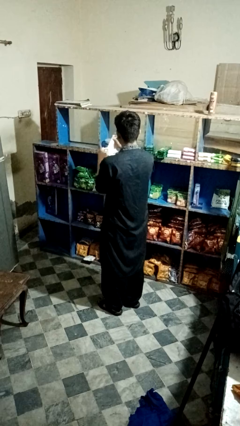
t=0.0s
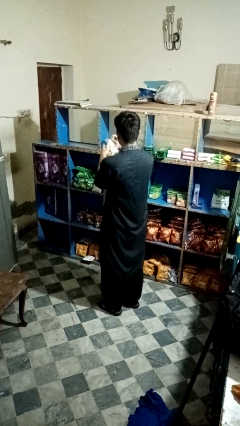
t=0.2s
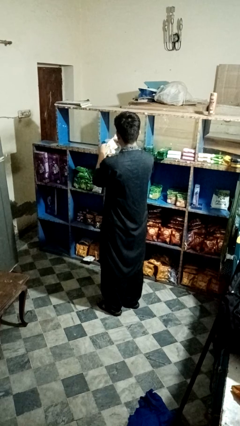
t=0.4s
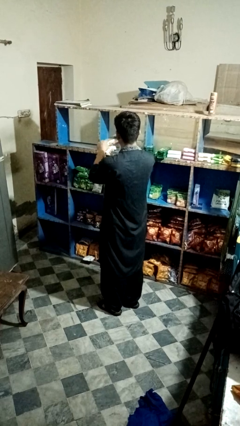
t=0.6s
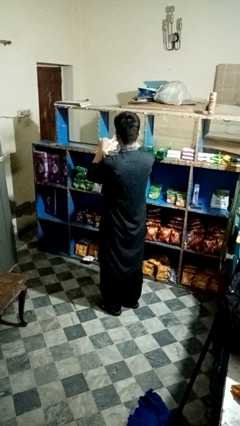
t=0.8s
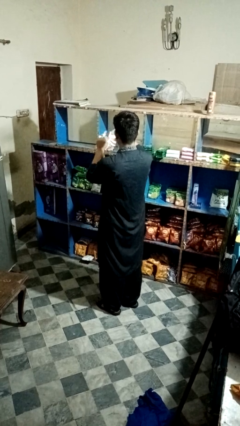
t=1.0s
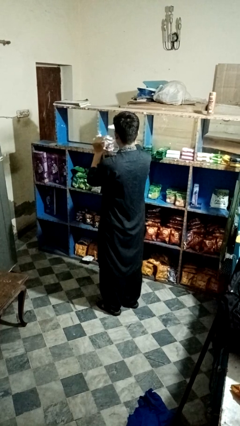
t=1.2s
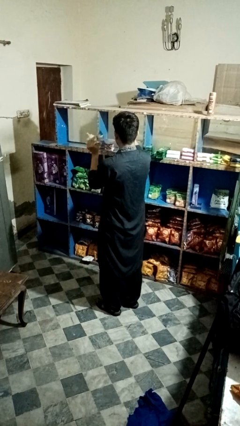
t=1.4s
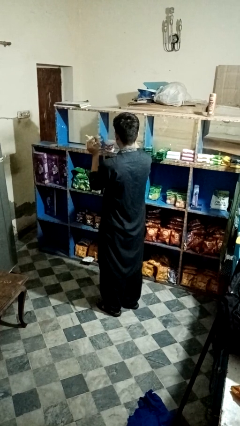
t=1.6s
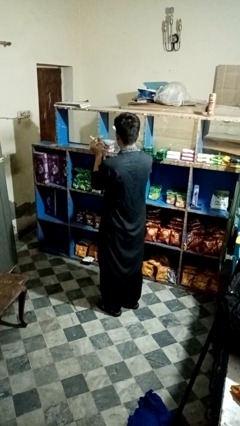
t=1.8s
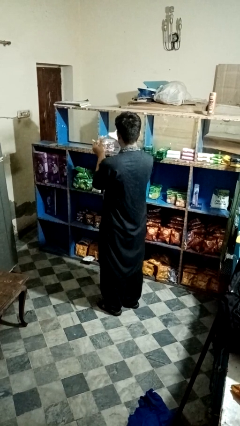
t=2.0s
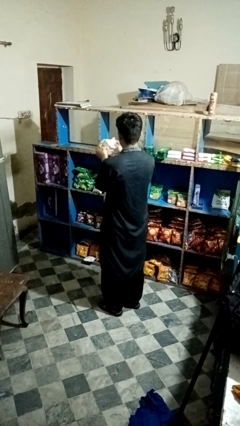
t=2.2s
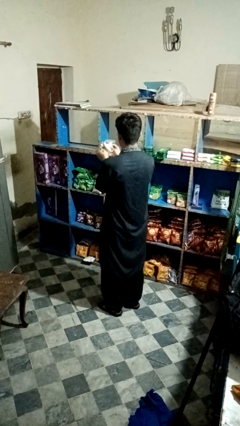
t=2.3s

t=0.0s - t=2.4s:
person tears paper

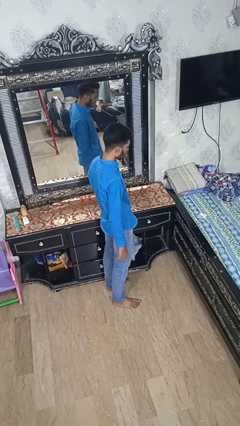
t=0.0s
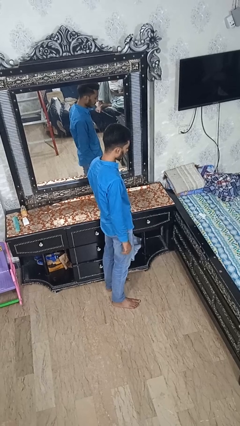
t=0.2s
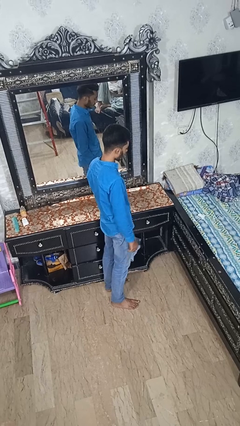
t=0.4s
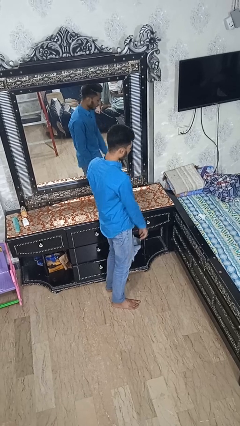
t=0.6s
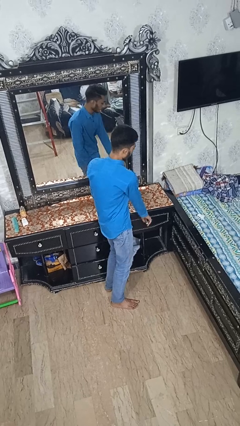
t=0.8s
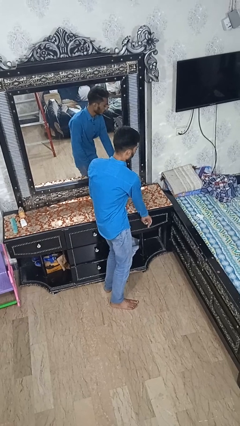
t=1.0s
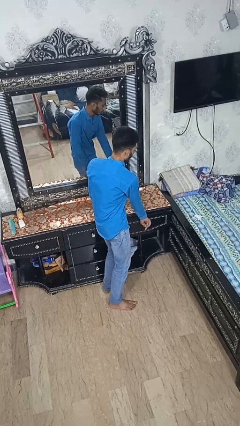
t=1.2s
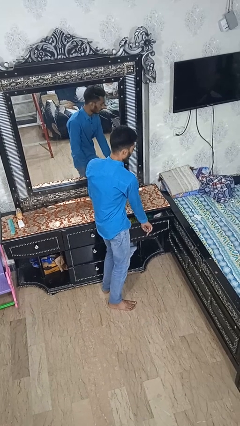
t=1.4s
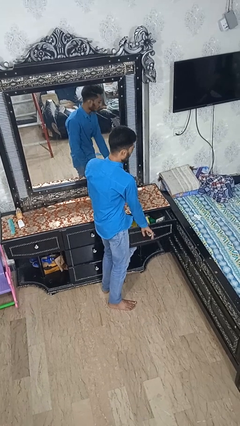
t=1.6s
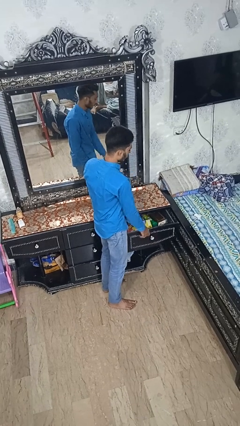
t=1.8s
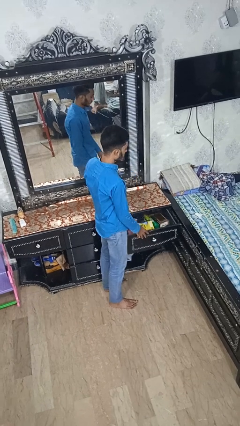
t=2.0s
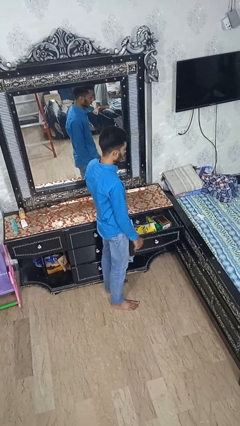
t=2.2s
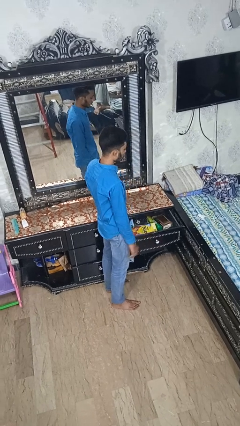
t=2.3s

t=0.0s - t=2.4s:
person opens dresser drawer

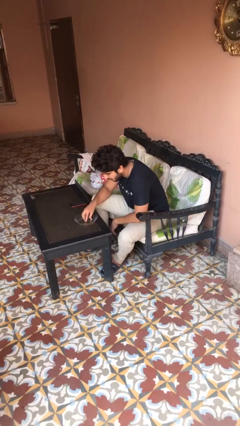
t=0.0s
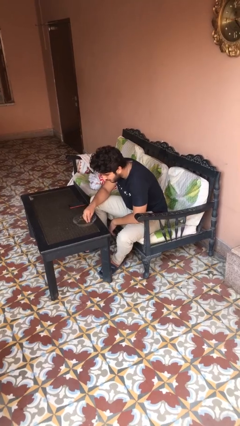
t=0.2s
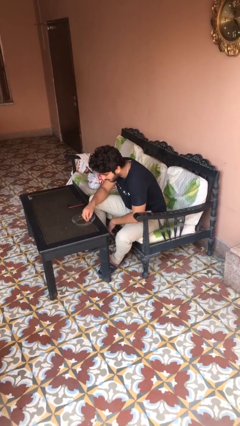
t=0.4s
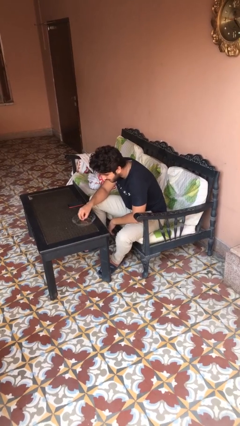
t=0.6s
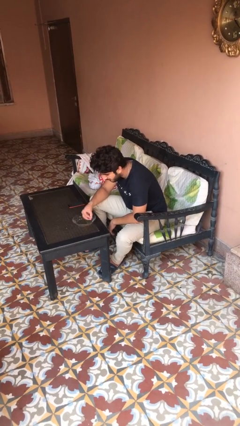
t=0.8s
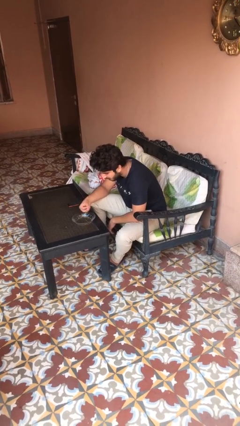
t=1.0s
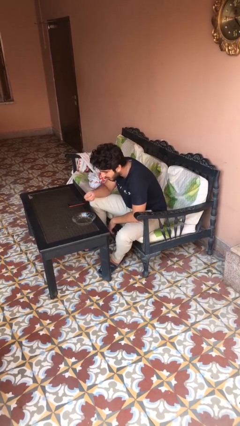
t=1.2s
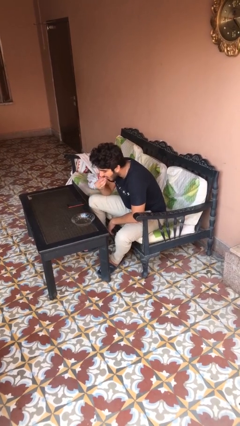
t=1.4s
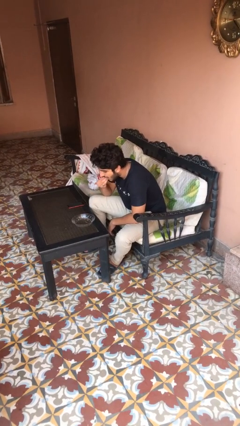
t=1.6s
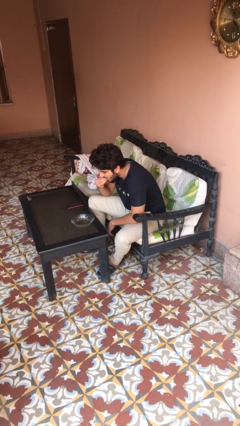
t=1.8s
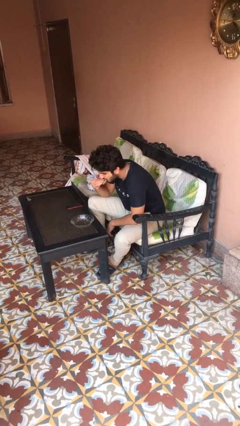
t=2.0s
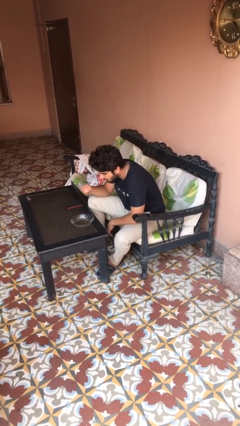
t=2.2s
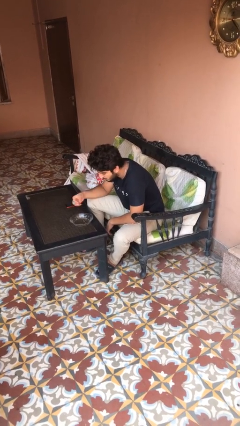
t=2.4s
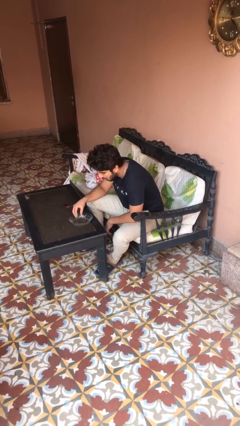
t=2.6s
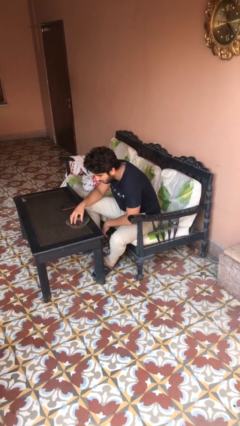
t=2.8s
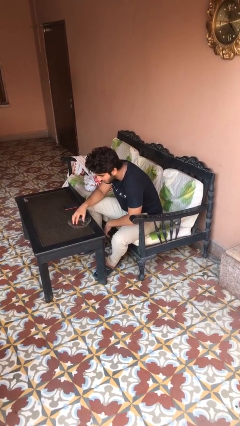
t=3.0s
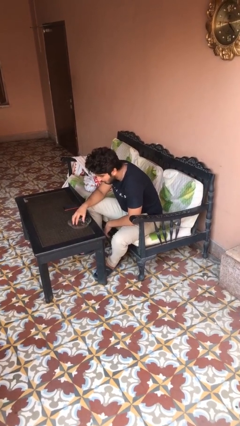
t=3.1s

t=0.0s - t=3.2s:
person eats with hands

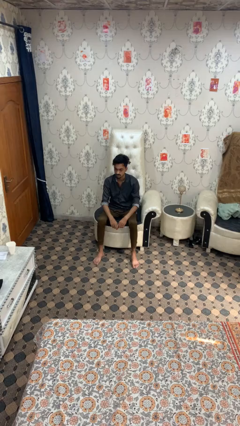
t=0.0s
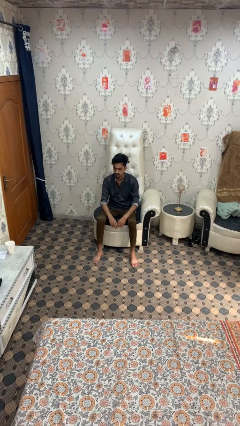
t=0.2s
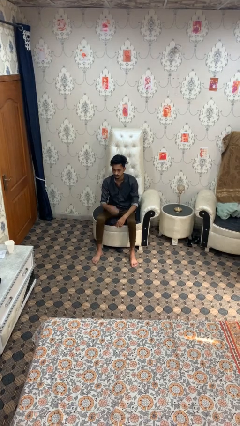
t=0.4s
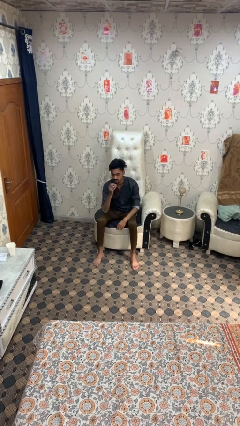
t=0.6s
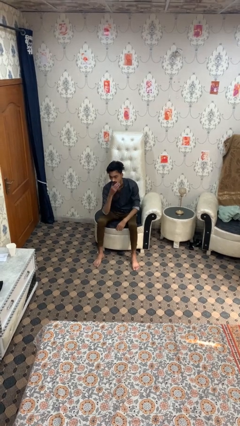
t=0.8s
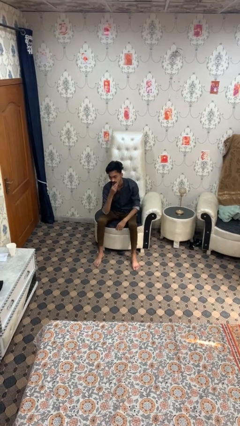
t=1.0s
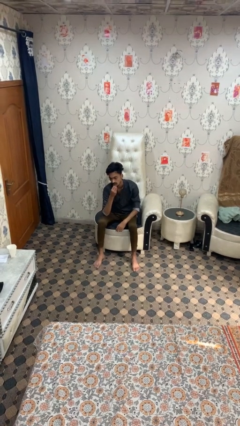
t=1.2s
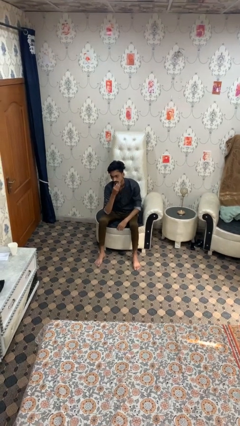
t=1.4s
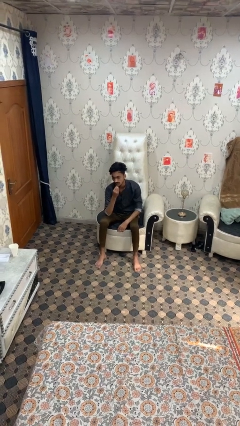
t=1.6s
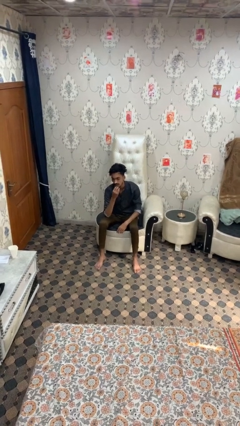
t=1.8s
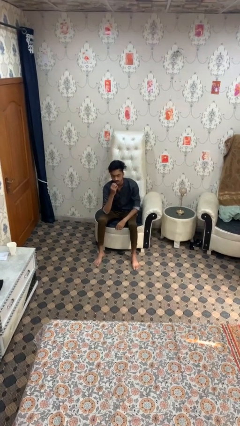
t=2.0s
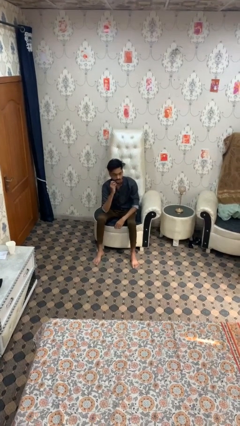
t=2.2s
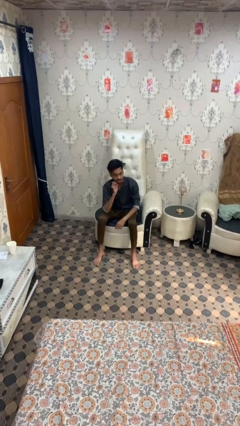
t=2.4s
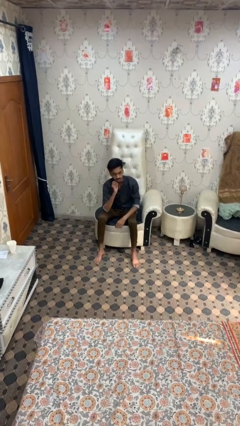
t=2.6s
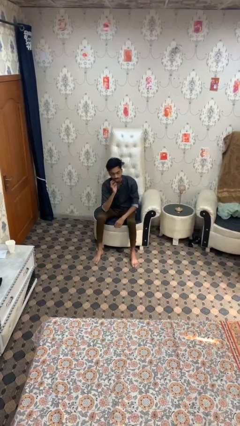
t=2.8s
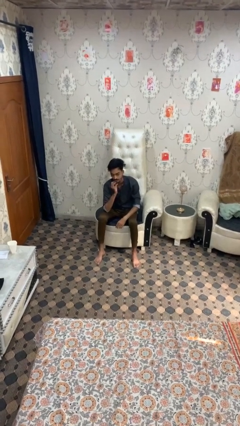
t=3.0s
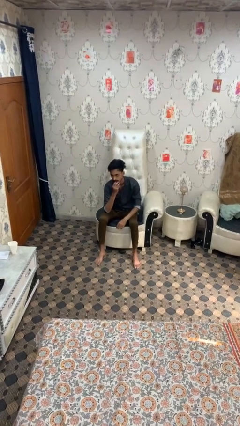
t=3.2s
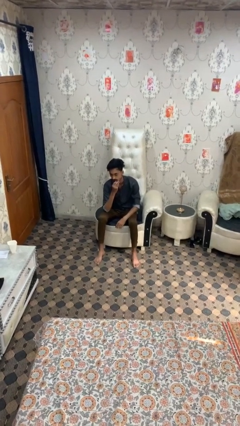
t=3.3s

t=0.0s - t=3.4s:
person strokes chin

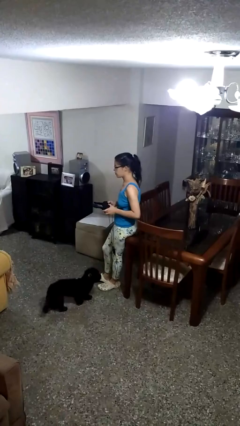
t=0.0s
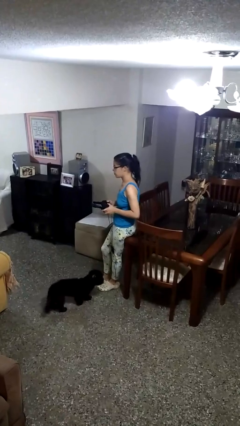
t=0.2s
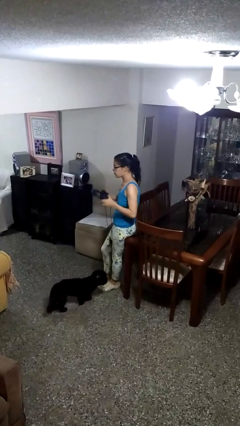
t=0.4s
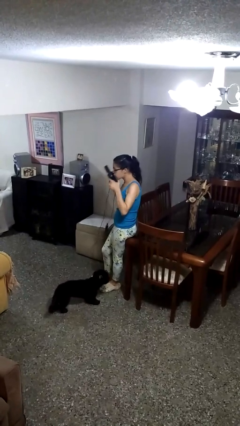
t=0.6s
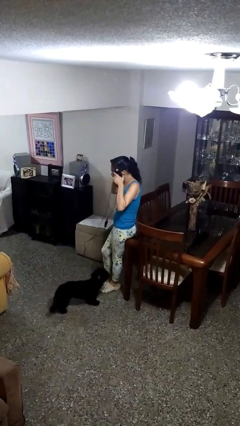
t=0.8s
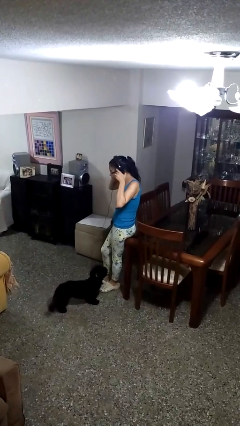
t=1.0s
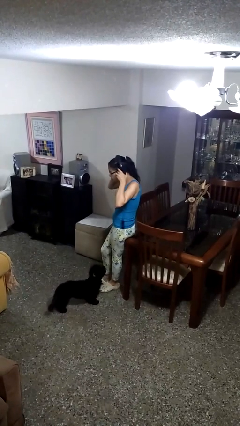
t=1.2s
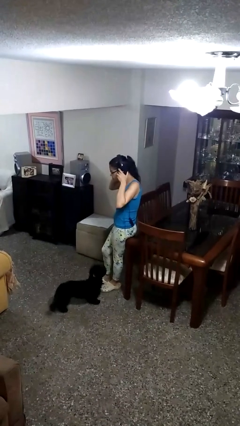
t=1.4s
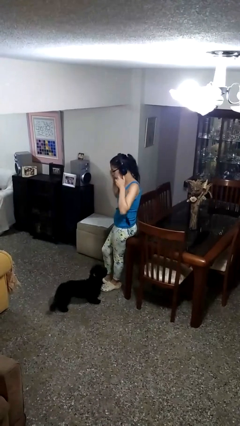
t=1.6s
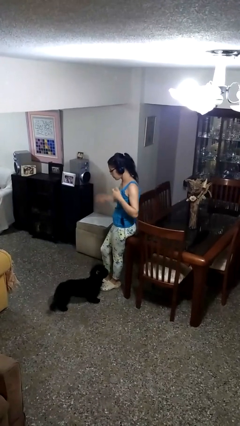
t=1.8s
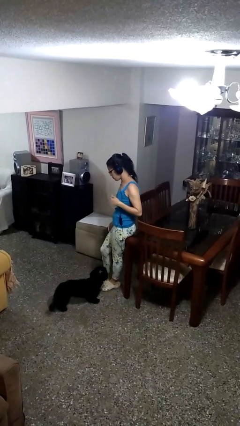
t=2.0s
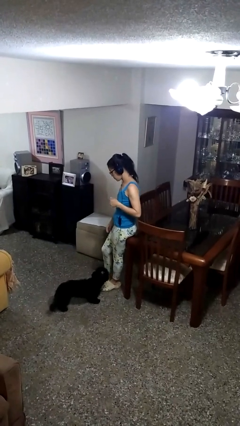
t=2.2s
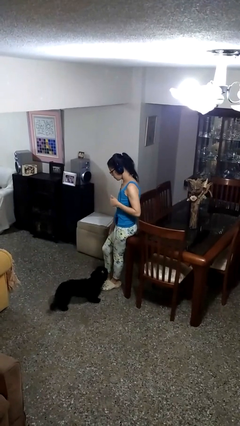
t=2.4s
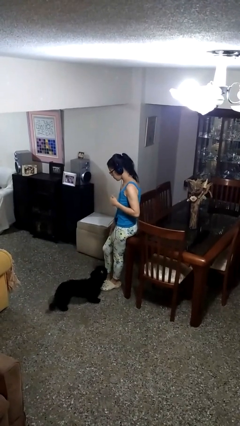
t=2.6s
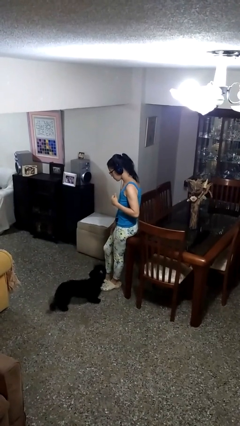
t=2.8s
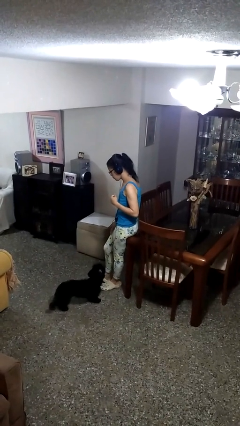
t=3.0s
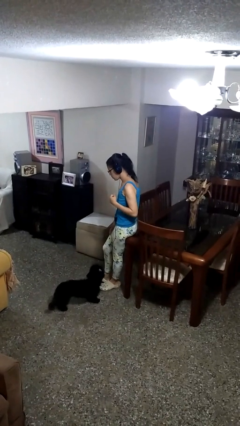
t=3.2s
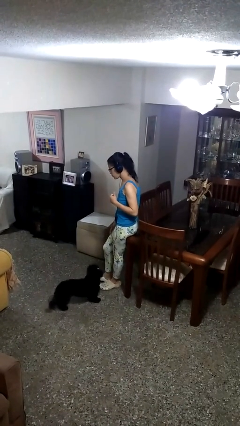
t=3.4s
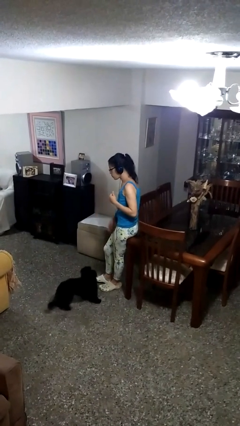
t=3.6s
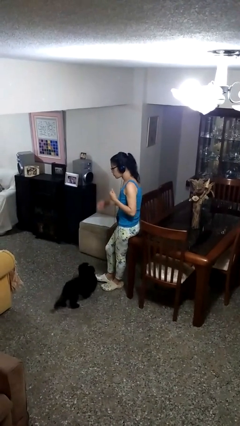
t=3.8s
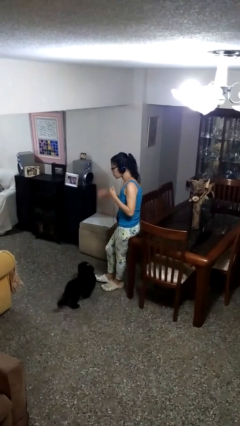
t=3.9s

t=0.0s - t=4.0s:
person puts on headphones

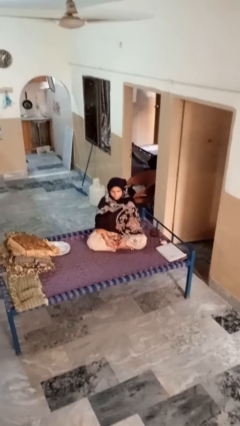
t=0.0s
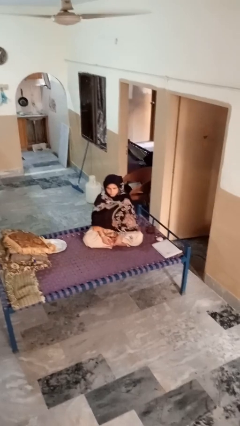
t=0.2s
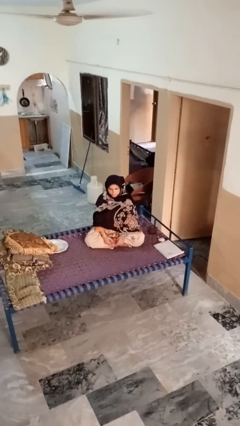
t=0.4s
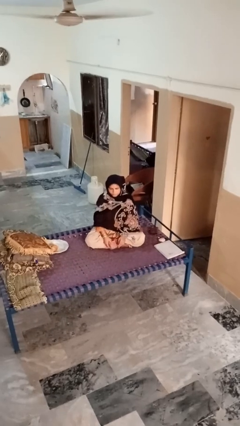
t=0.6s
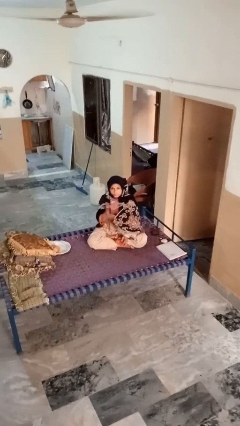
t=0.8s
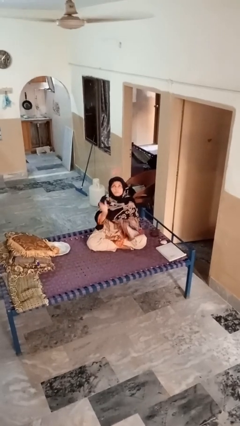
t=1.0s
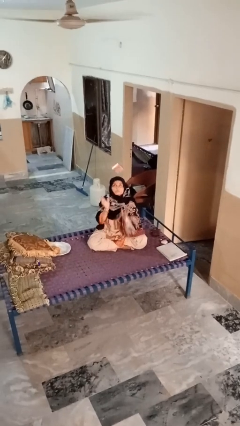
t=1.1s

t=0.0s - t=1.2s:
person drops object
